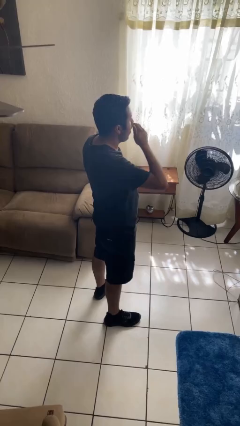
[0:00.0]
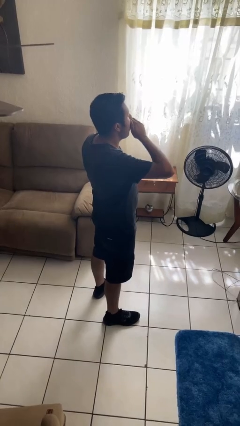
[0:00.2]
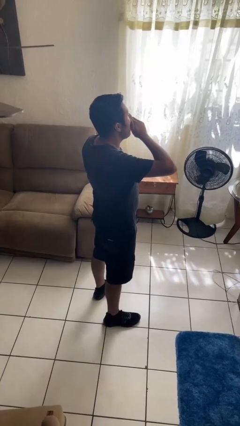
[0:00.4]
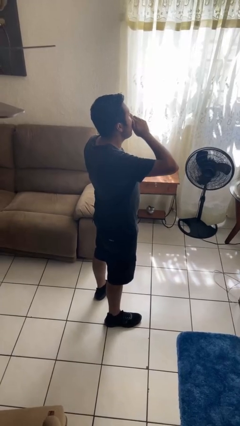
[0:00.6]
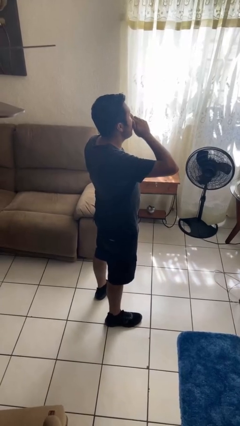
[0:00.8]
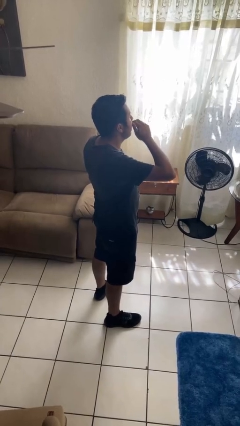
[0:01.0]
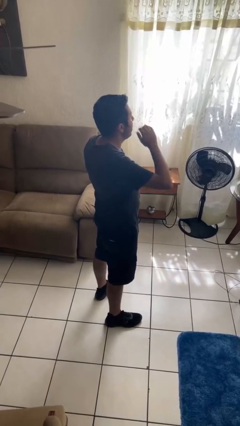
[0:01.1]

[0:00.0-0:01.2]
person yawns

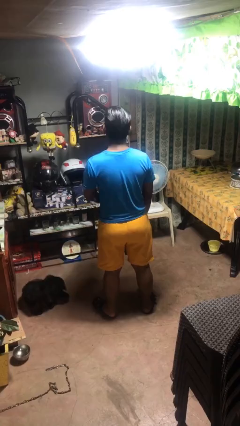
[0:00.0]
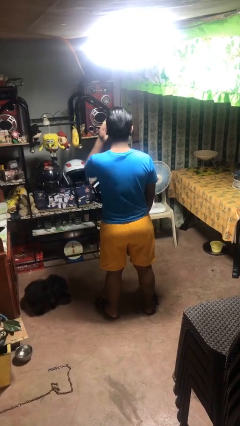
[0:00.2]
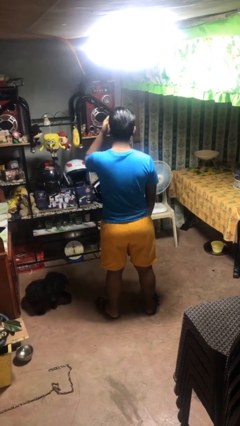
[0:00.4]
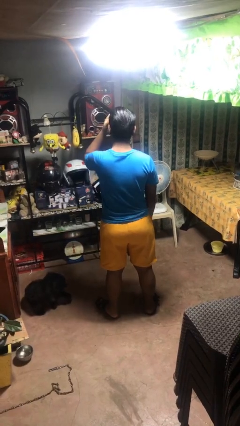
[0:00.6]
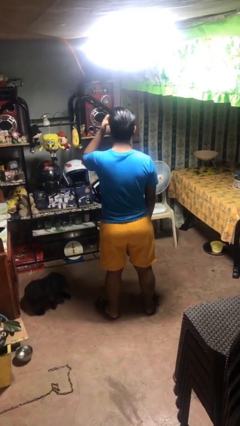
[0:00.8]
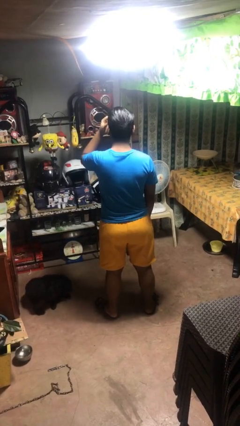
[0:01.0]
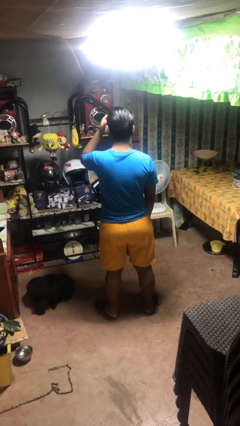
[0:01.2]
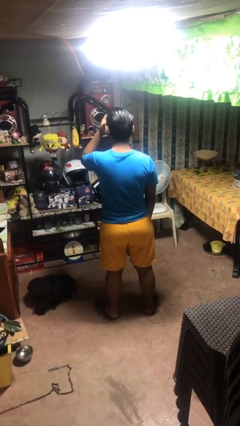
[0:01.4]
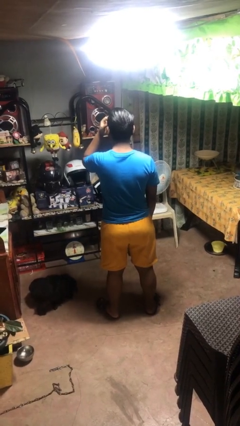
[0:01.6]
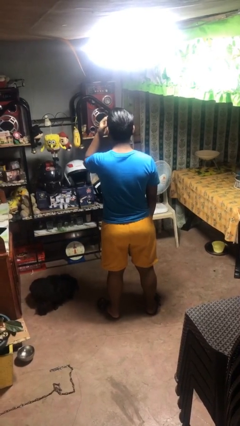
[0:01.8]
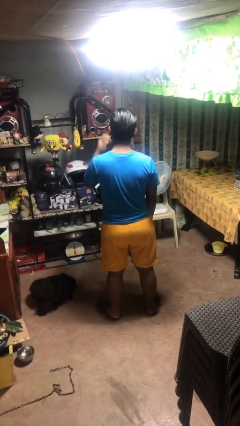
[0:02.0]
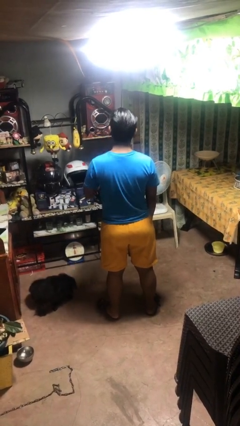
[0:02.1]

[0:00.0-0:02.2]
person scratches face

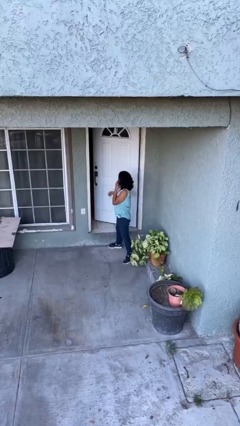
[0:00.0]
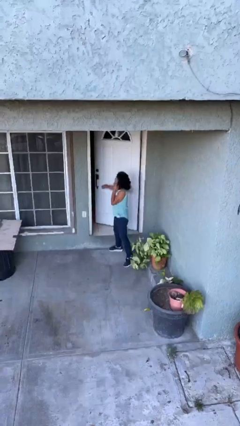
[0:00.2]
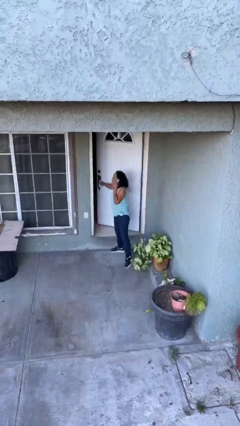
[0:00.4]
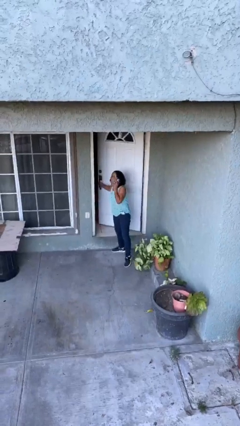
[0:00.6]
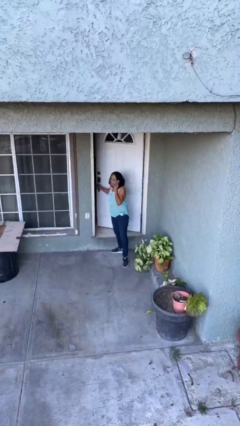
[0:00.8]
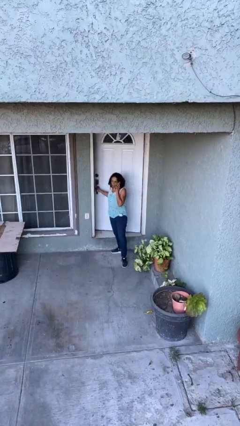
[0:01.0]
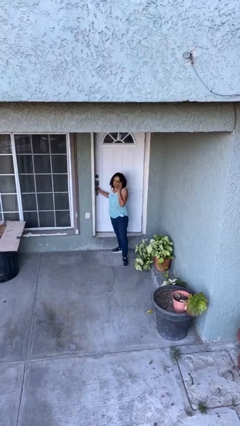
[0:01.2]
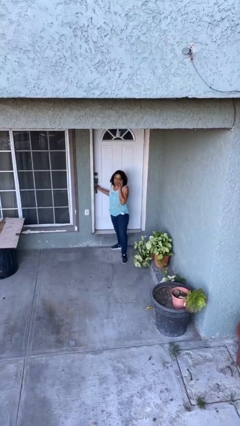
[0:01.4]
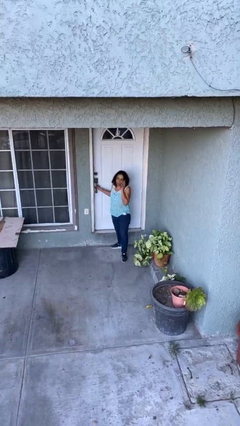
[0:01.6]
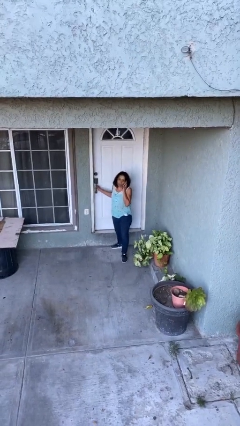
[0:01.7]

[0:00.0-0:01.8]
person closes facility door

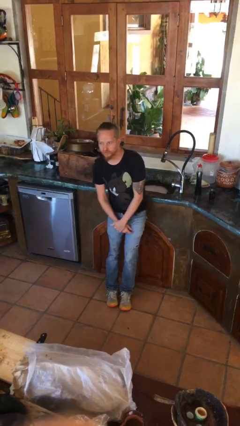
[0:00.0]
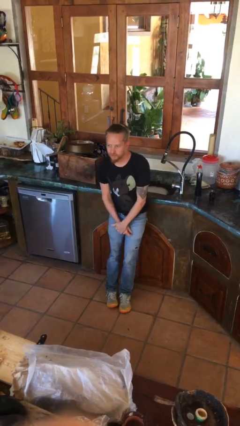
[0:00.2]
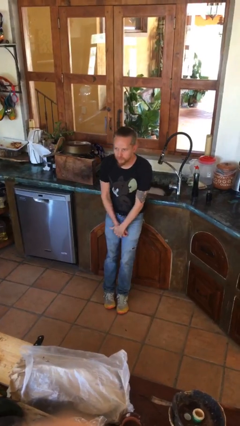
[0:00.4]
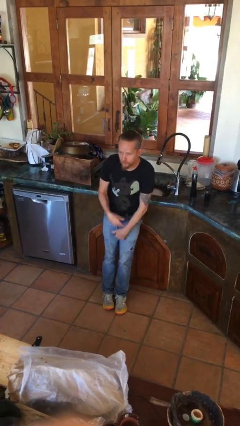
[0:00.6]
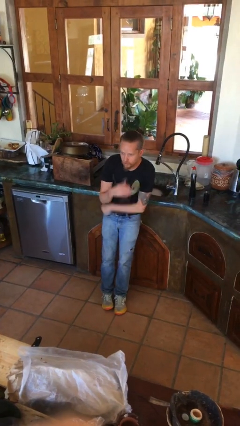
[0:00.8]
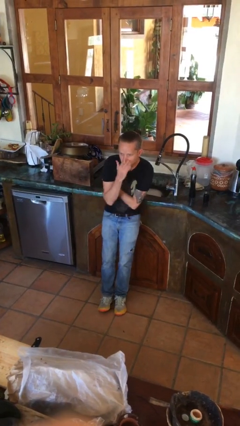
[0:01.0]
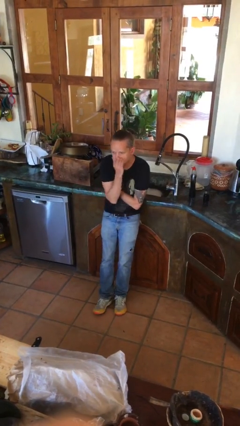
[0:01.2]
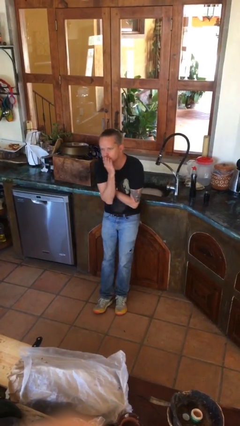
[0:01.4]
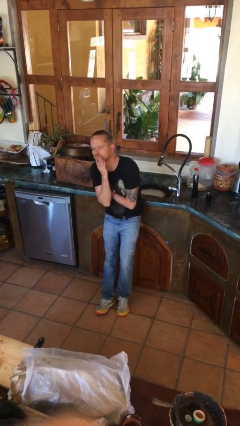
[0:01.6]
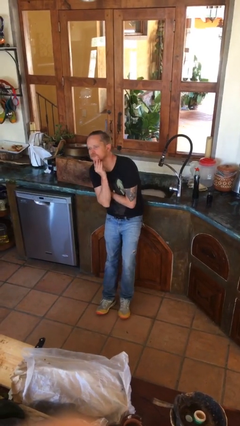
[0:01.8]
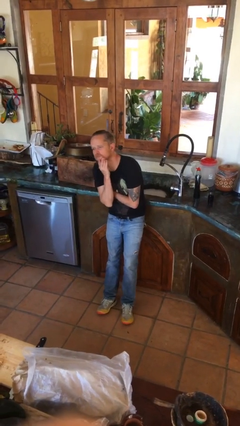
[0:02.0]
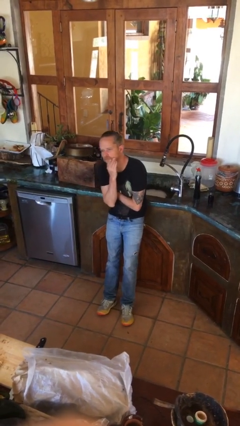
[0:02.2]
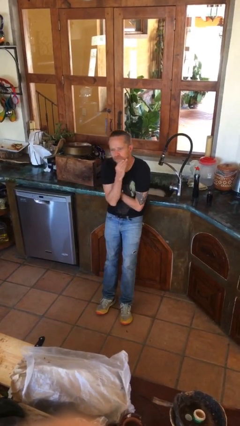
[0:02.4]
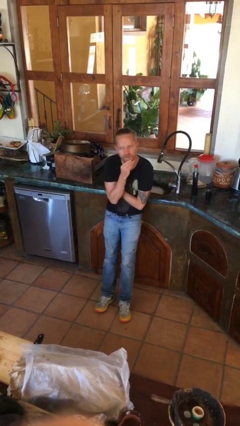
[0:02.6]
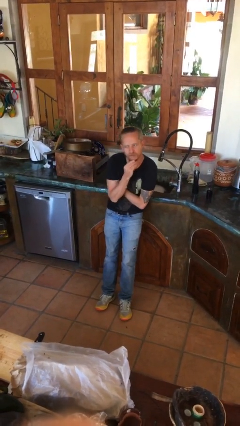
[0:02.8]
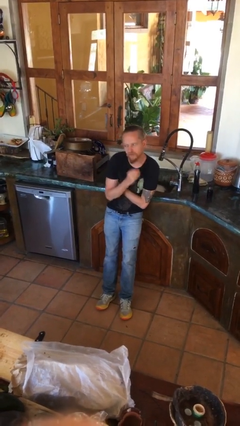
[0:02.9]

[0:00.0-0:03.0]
person strokes chin

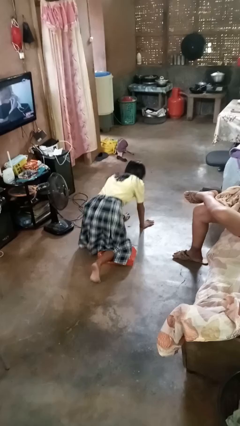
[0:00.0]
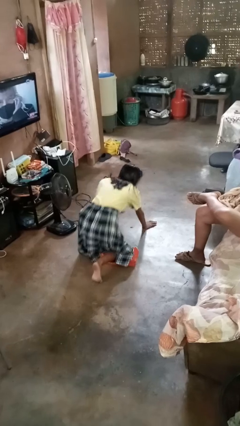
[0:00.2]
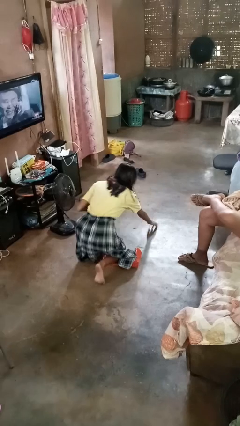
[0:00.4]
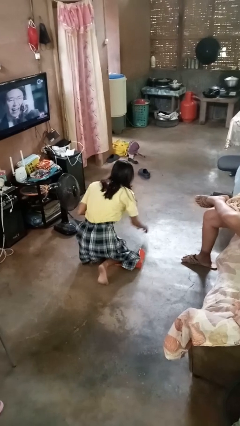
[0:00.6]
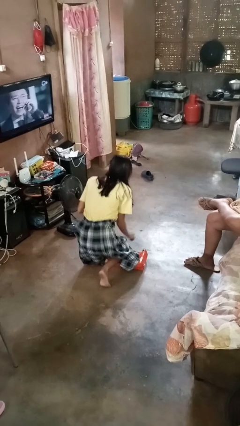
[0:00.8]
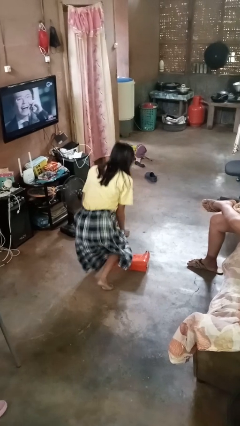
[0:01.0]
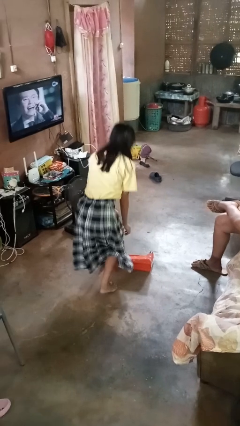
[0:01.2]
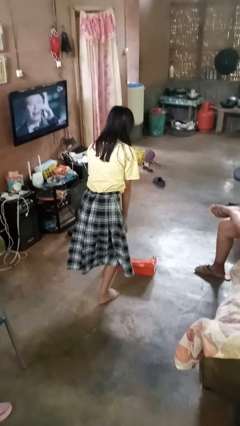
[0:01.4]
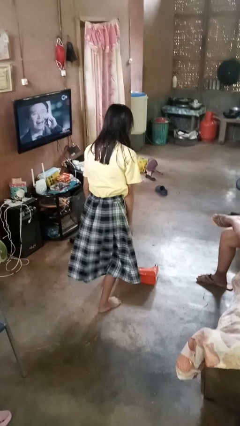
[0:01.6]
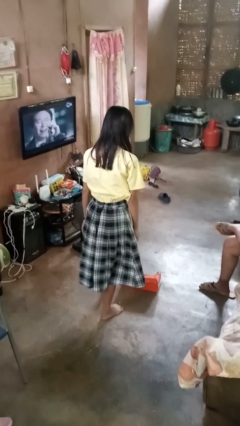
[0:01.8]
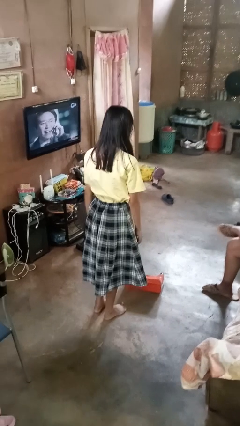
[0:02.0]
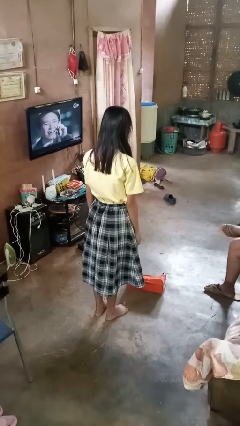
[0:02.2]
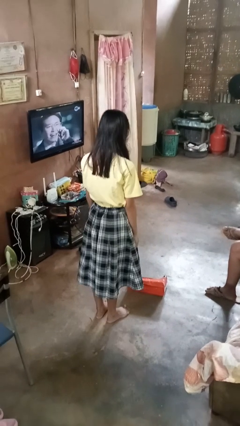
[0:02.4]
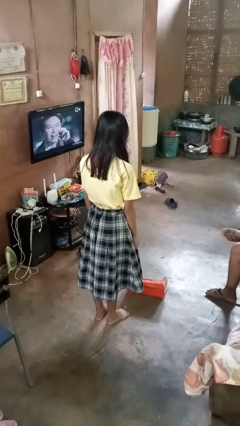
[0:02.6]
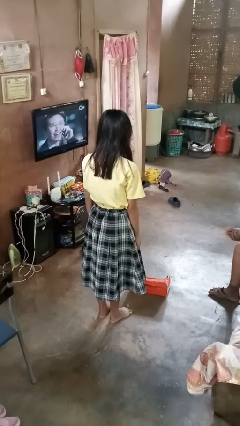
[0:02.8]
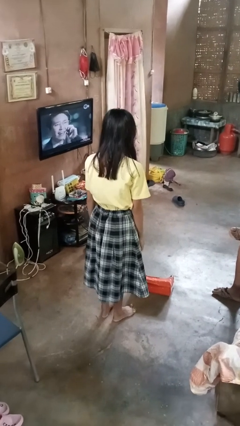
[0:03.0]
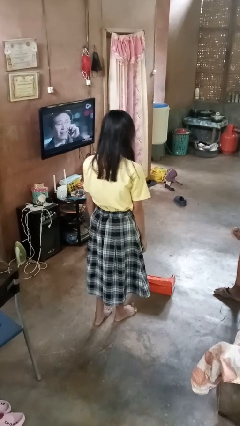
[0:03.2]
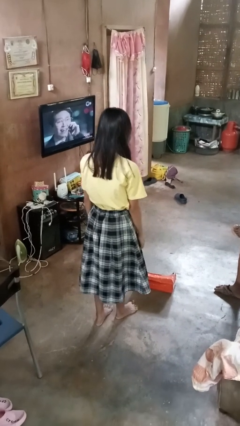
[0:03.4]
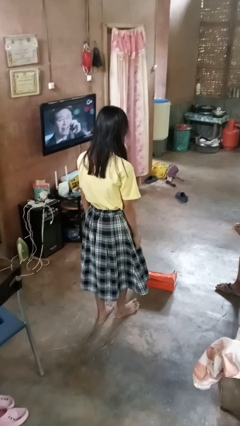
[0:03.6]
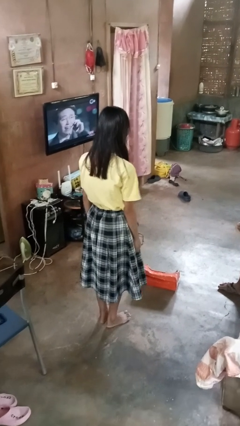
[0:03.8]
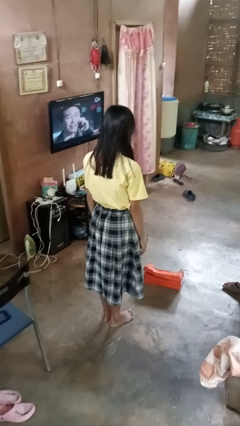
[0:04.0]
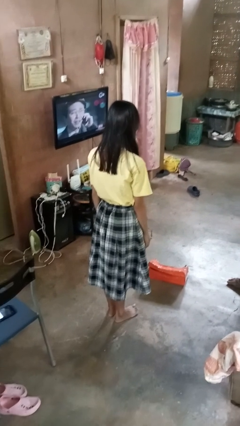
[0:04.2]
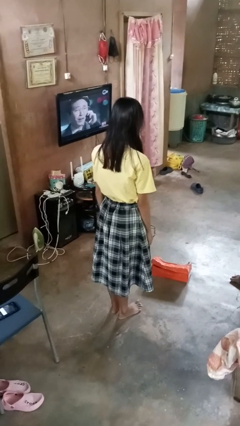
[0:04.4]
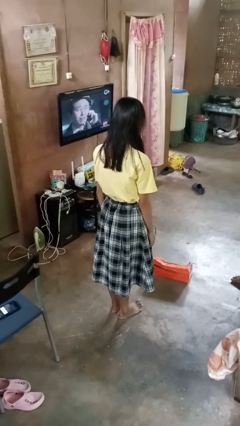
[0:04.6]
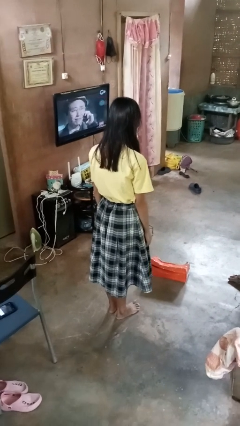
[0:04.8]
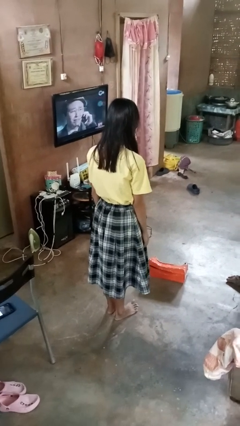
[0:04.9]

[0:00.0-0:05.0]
person stands up from floor

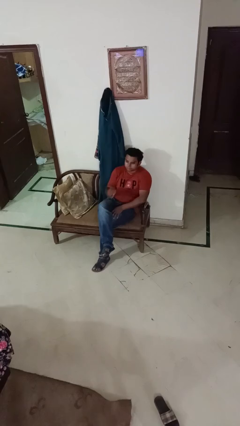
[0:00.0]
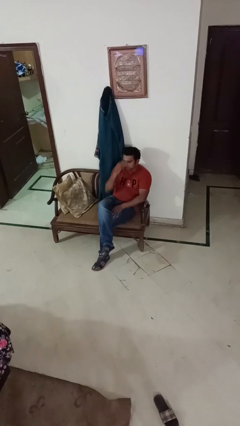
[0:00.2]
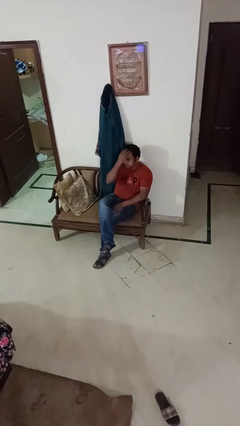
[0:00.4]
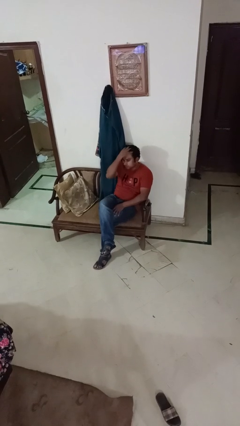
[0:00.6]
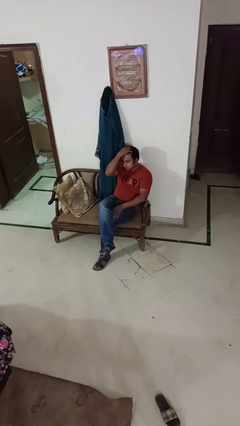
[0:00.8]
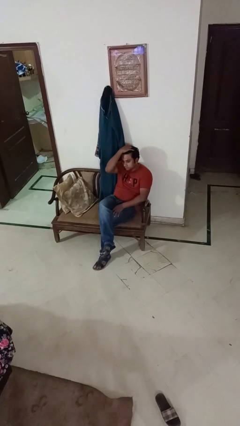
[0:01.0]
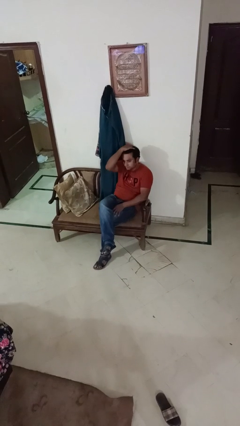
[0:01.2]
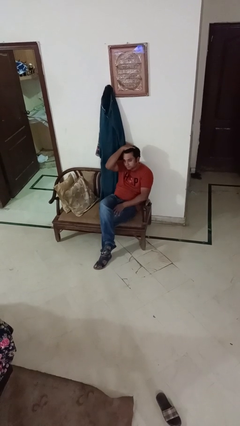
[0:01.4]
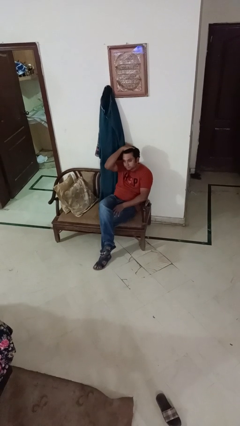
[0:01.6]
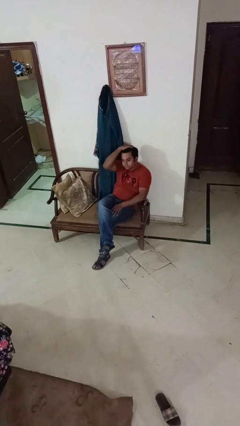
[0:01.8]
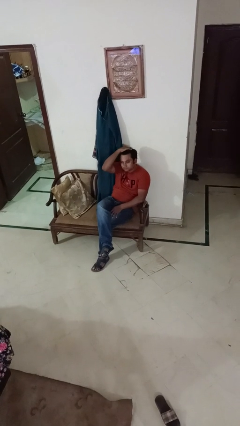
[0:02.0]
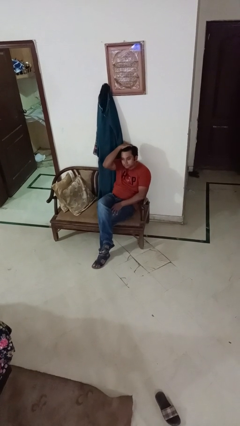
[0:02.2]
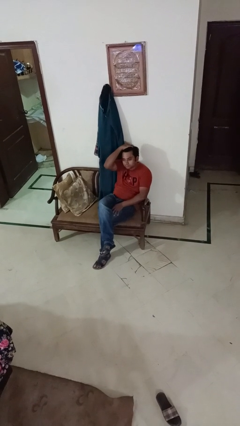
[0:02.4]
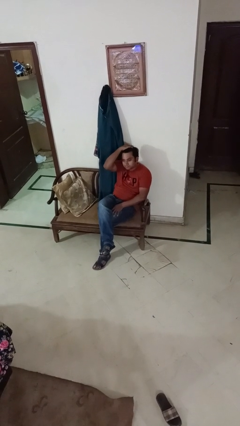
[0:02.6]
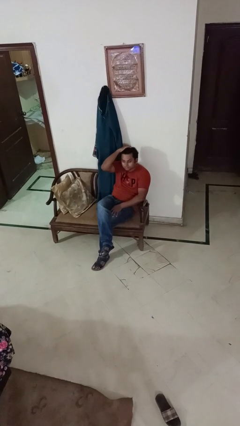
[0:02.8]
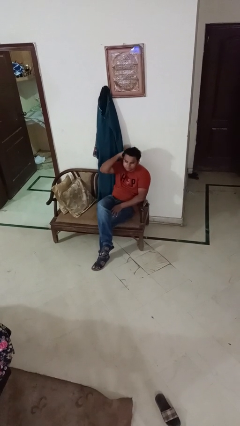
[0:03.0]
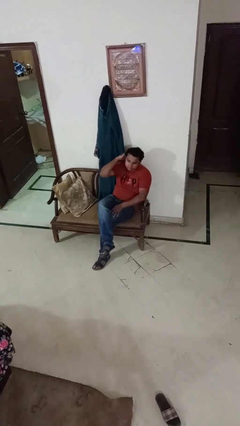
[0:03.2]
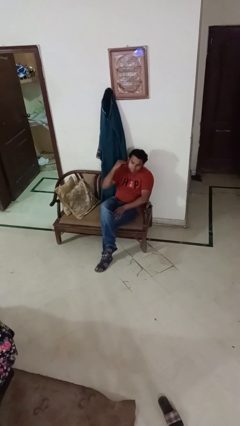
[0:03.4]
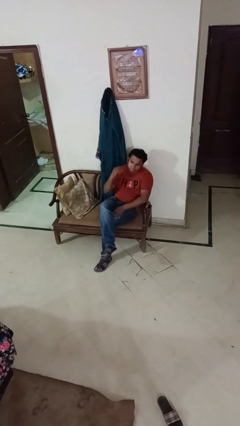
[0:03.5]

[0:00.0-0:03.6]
person strokes hair

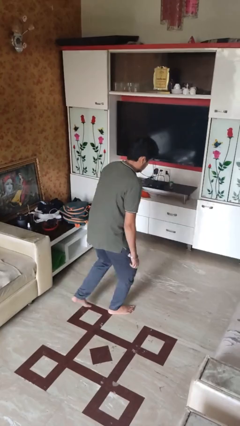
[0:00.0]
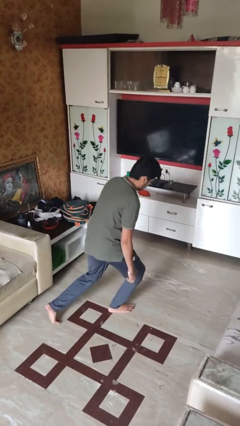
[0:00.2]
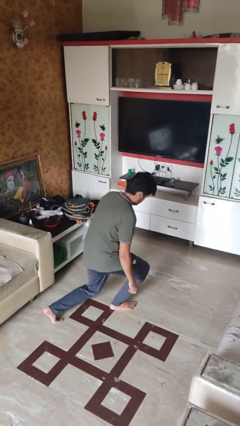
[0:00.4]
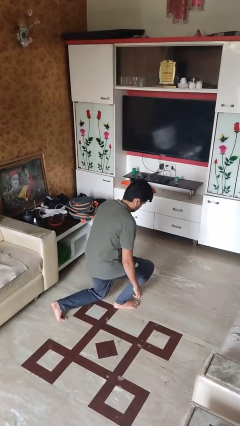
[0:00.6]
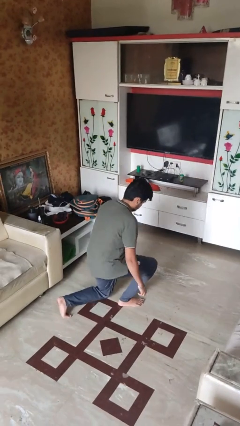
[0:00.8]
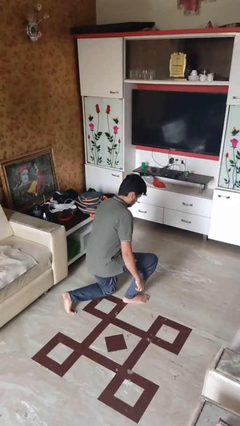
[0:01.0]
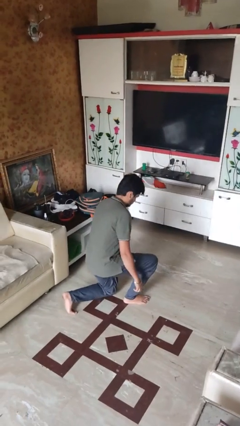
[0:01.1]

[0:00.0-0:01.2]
person kneels
